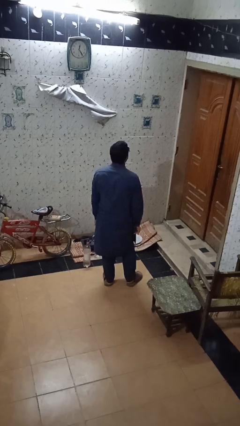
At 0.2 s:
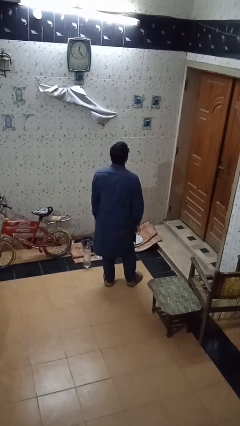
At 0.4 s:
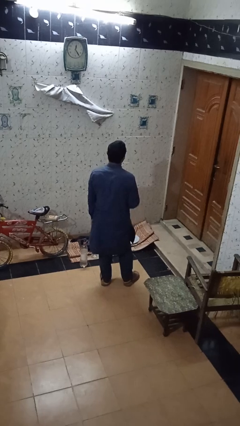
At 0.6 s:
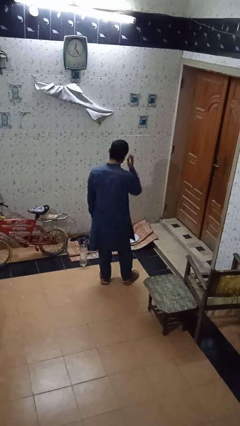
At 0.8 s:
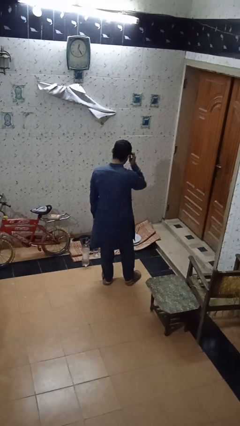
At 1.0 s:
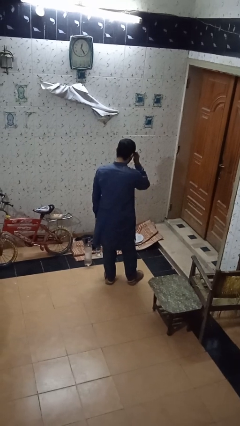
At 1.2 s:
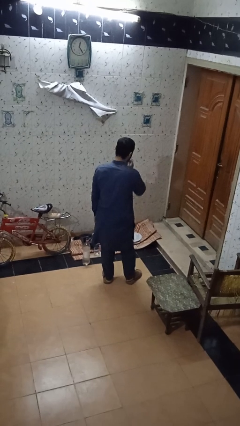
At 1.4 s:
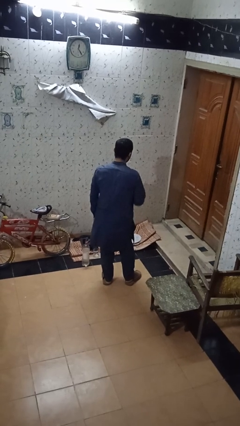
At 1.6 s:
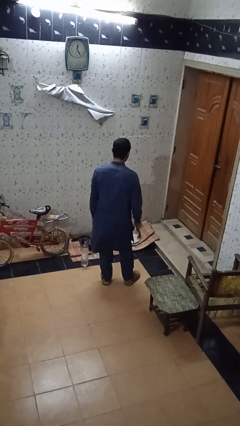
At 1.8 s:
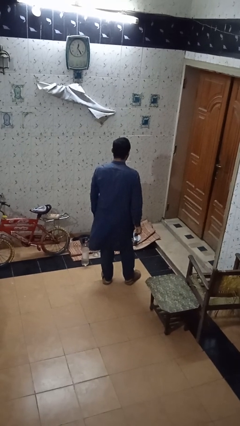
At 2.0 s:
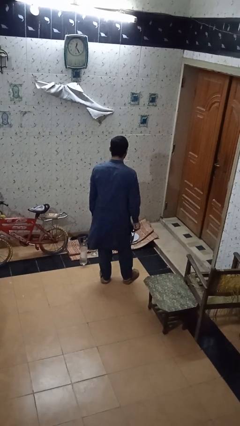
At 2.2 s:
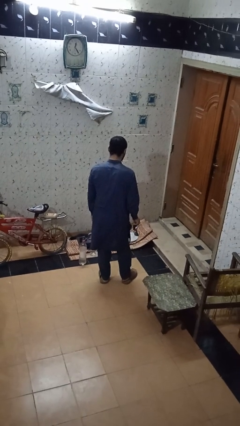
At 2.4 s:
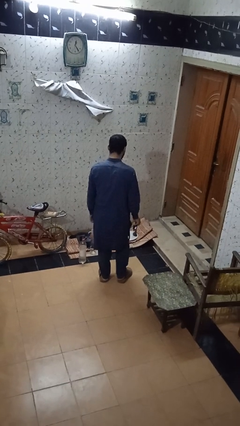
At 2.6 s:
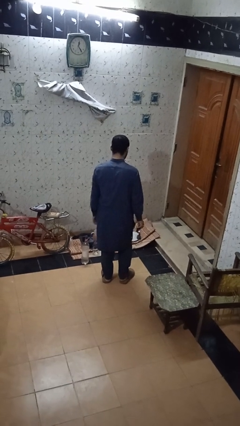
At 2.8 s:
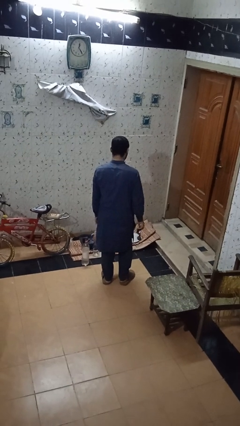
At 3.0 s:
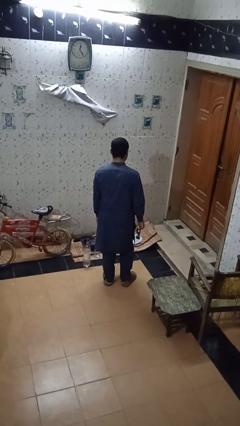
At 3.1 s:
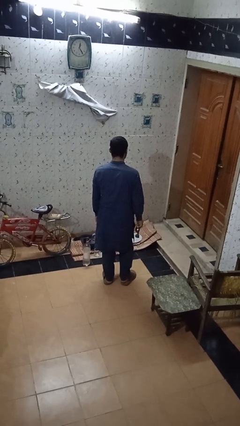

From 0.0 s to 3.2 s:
person takes off sunglasses

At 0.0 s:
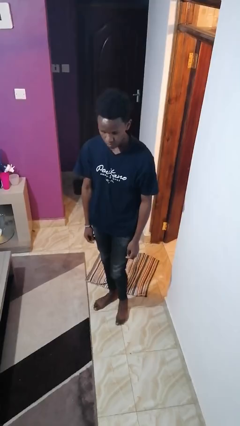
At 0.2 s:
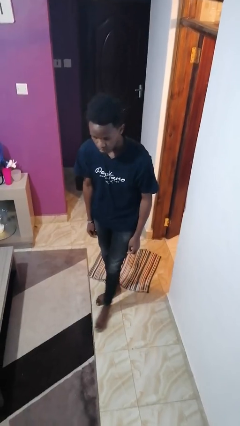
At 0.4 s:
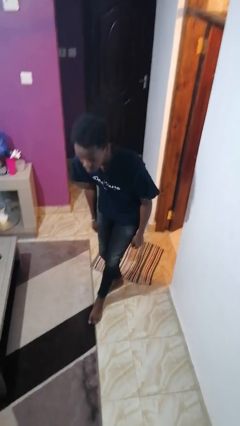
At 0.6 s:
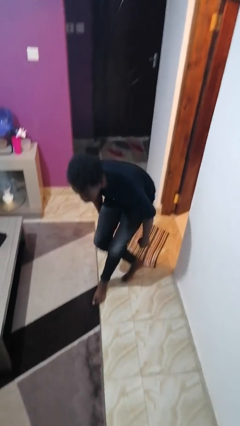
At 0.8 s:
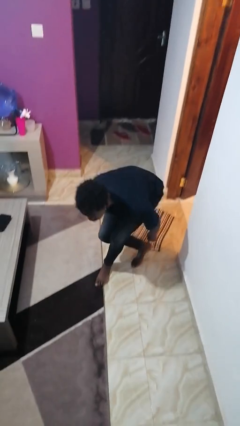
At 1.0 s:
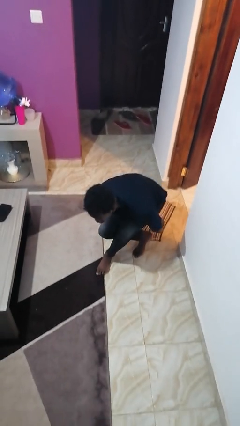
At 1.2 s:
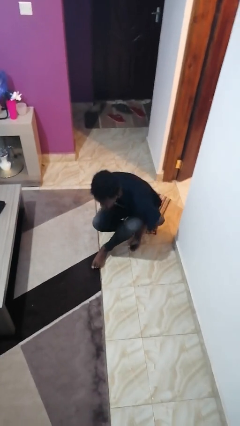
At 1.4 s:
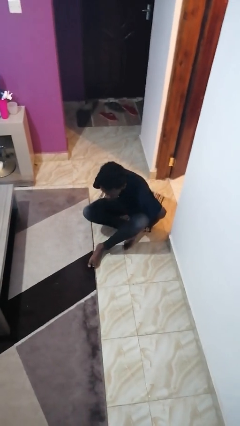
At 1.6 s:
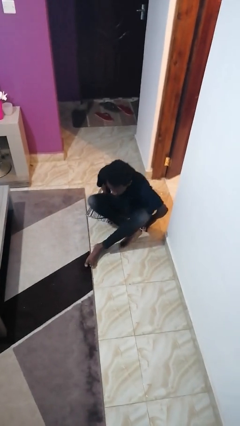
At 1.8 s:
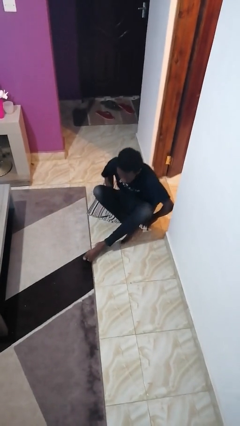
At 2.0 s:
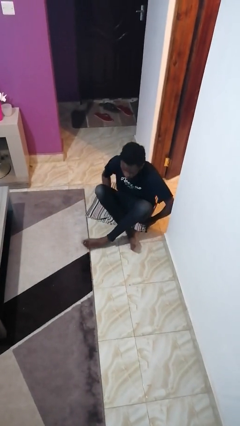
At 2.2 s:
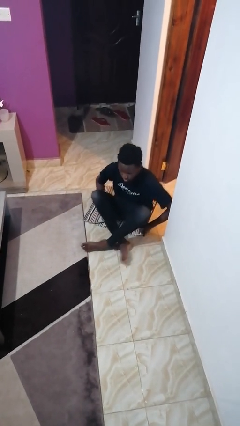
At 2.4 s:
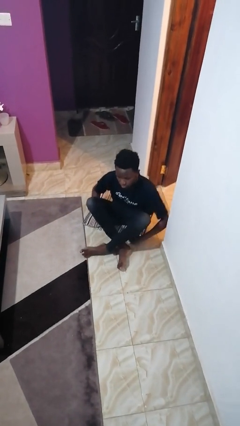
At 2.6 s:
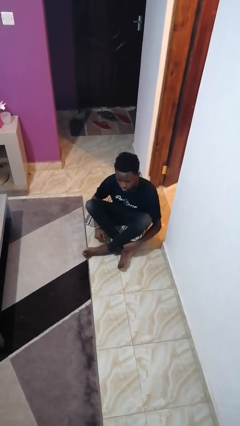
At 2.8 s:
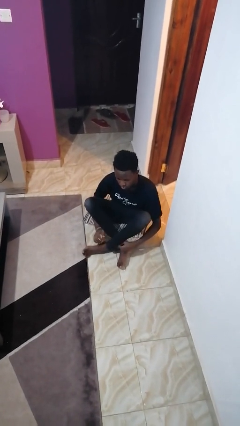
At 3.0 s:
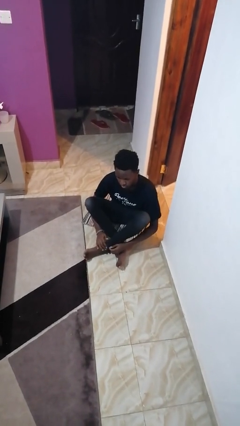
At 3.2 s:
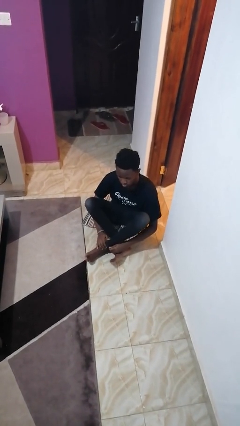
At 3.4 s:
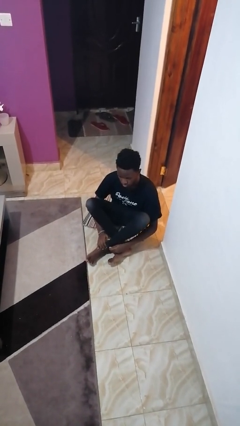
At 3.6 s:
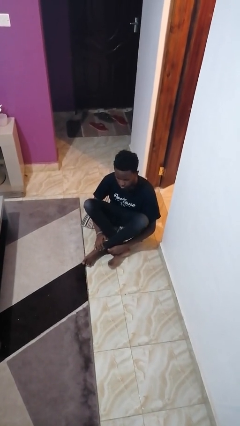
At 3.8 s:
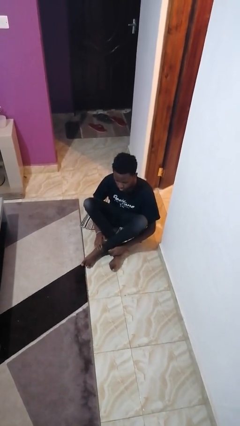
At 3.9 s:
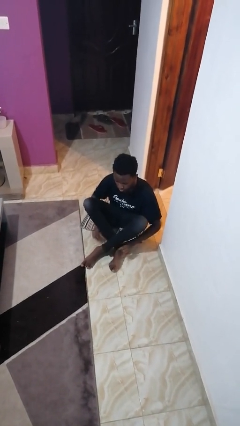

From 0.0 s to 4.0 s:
person sits crisscross

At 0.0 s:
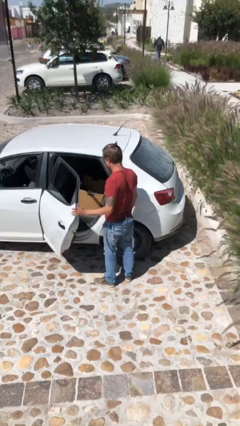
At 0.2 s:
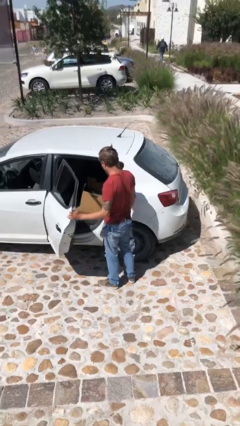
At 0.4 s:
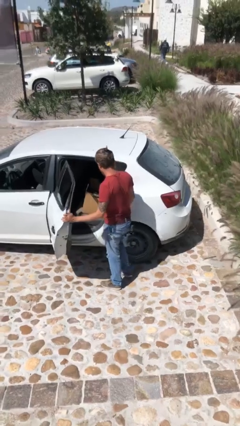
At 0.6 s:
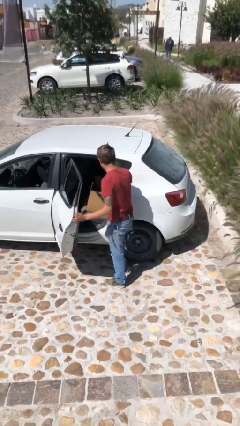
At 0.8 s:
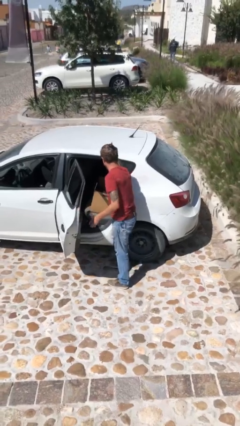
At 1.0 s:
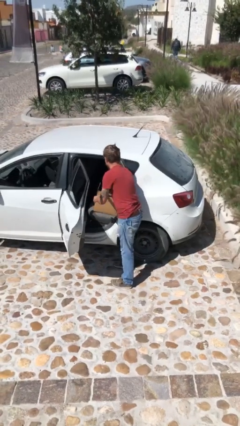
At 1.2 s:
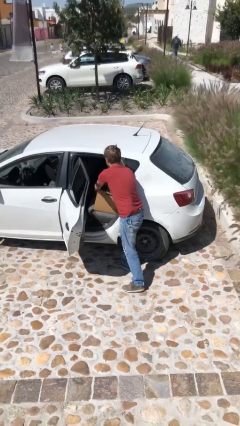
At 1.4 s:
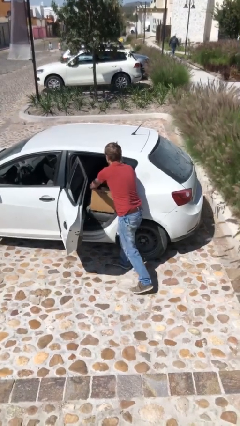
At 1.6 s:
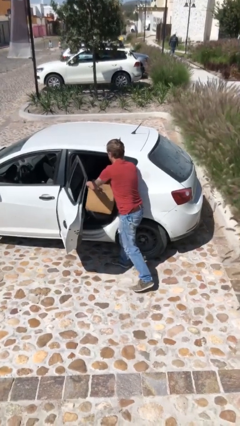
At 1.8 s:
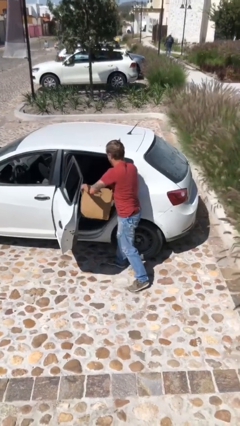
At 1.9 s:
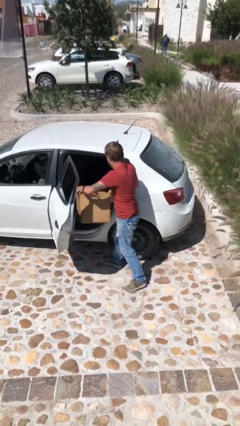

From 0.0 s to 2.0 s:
person unloads car

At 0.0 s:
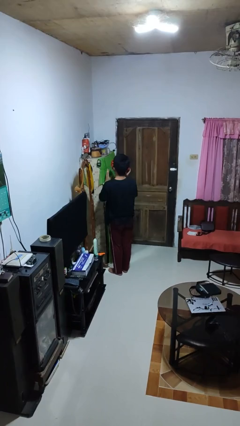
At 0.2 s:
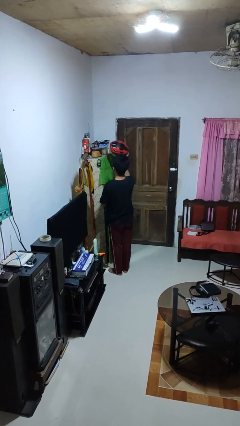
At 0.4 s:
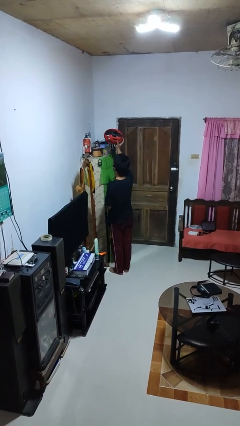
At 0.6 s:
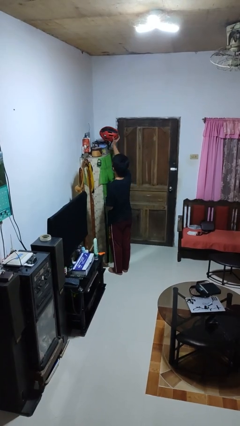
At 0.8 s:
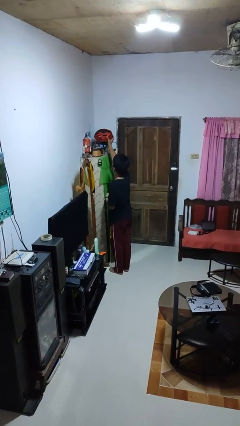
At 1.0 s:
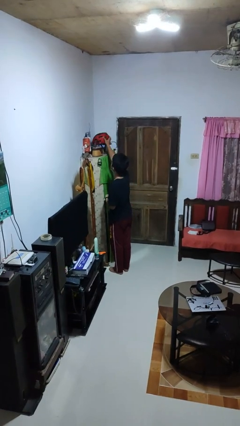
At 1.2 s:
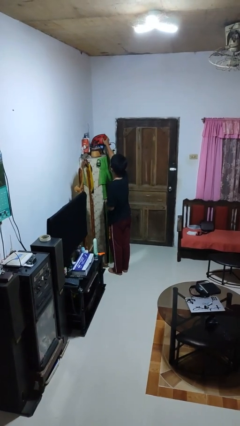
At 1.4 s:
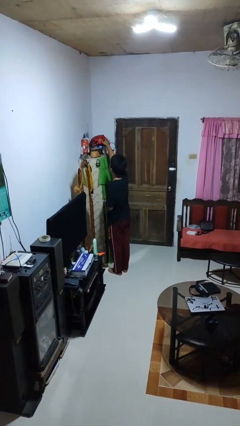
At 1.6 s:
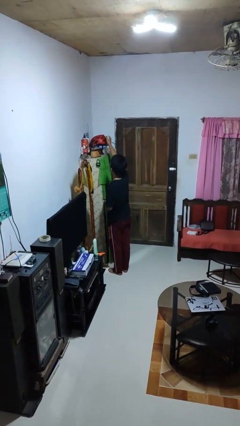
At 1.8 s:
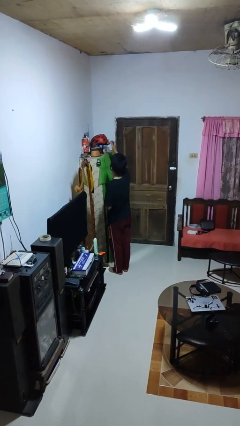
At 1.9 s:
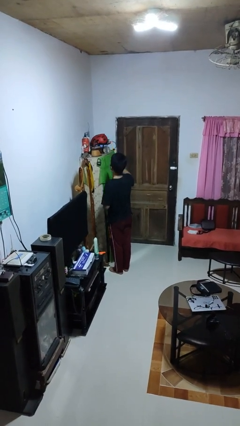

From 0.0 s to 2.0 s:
person puts down object on shelf

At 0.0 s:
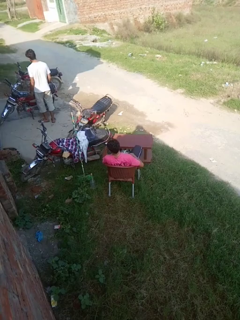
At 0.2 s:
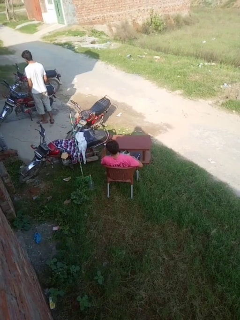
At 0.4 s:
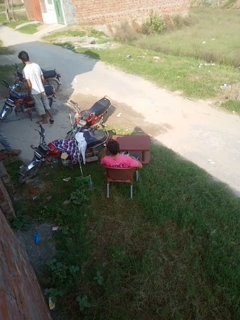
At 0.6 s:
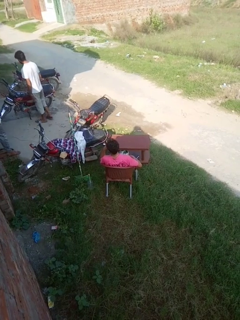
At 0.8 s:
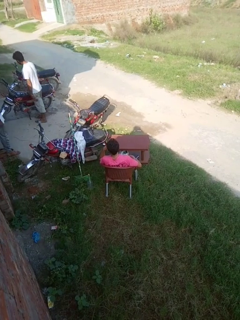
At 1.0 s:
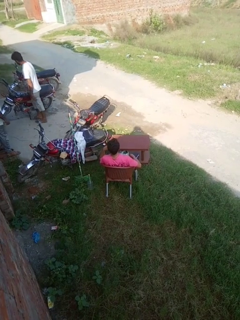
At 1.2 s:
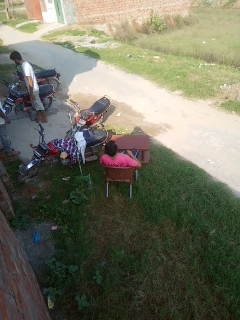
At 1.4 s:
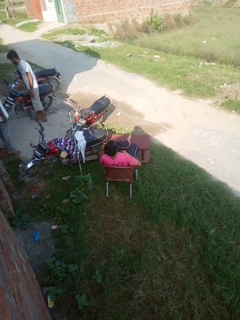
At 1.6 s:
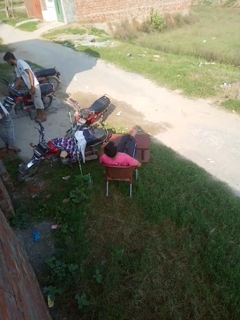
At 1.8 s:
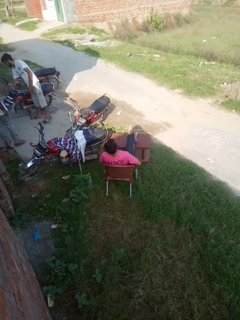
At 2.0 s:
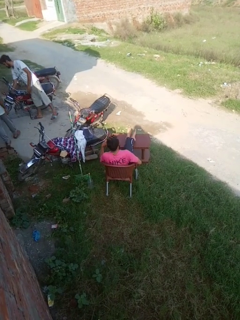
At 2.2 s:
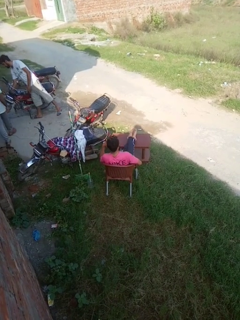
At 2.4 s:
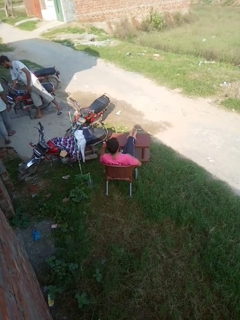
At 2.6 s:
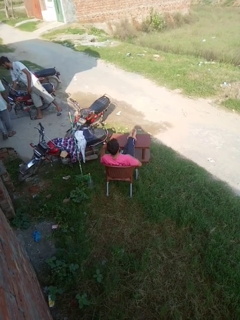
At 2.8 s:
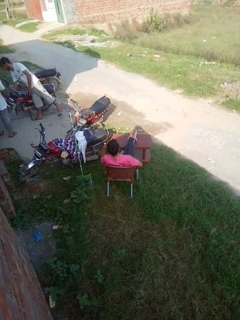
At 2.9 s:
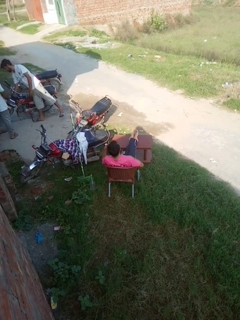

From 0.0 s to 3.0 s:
person puts feet up

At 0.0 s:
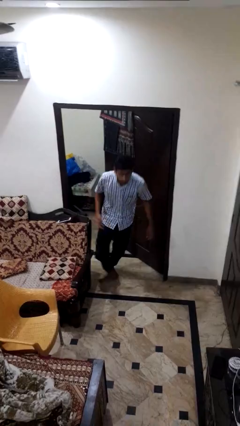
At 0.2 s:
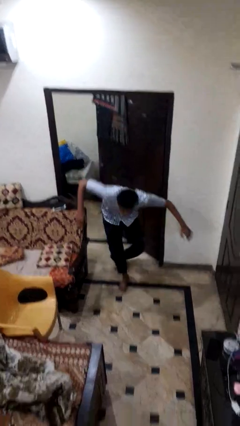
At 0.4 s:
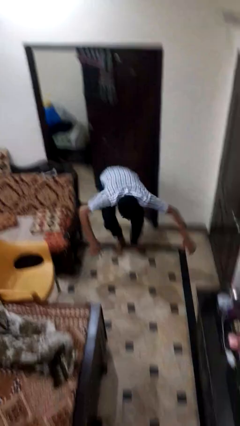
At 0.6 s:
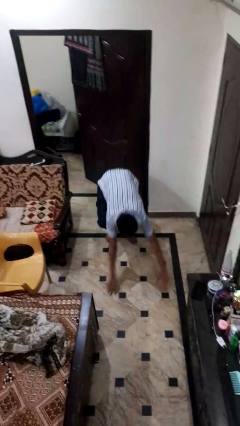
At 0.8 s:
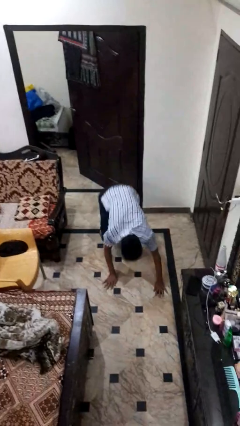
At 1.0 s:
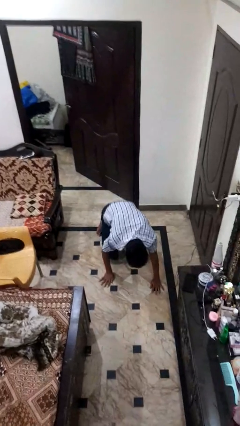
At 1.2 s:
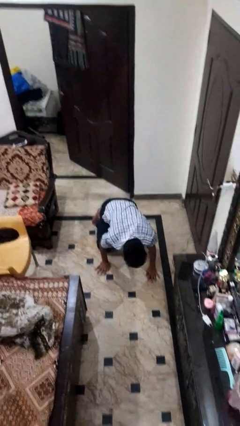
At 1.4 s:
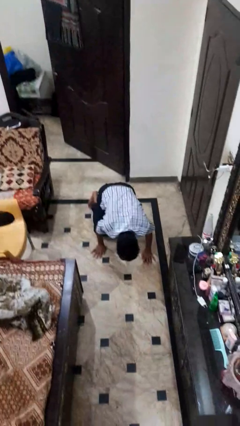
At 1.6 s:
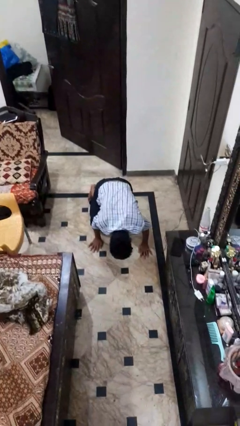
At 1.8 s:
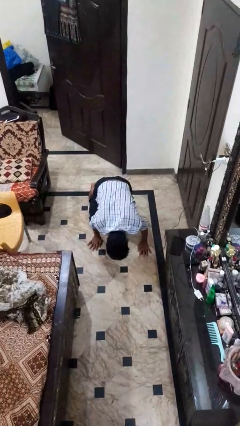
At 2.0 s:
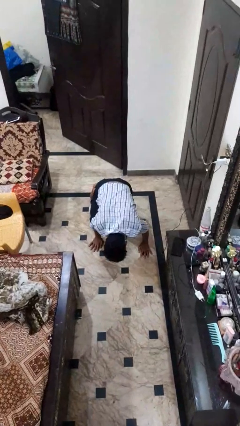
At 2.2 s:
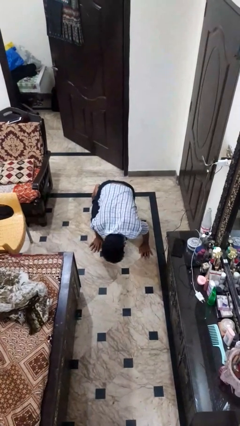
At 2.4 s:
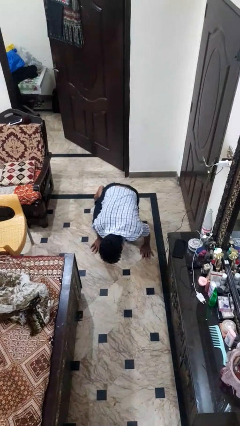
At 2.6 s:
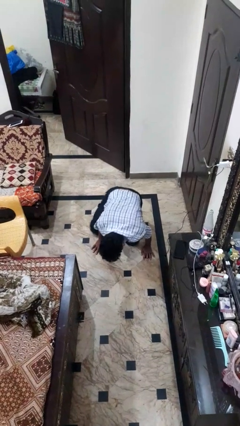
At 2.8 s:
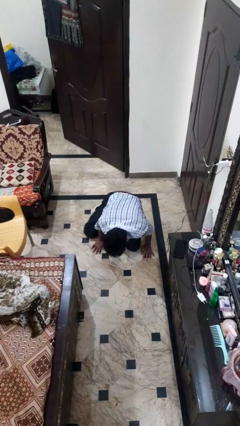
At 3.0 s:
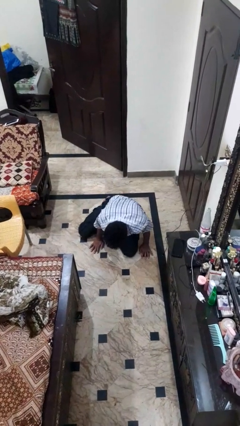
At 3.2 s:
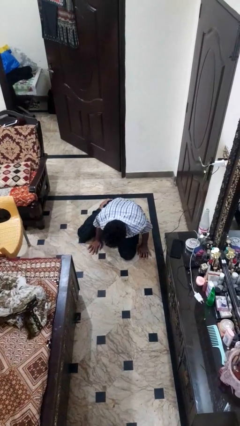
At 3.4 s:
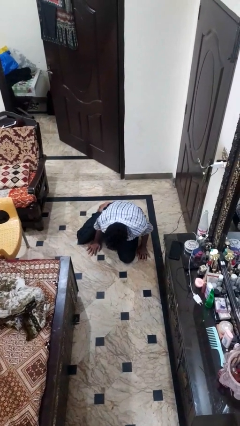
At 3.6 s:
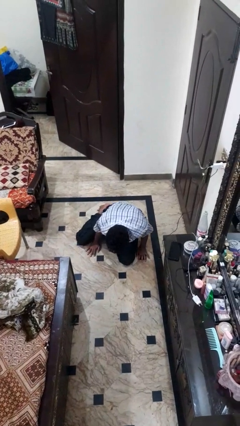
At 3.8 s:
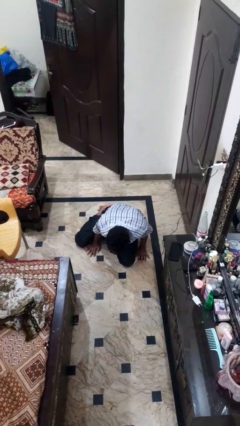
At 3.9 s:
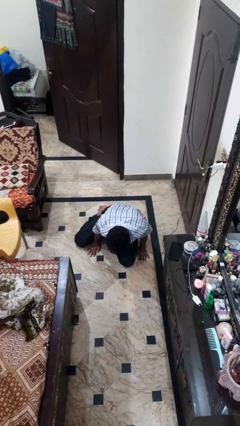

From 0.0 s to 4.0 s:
person trips on object on floor
